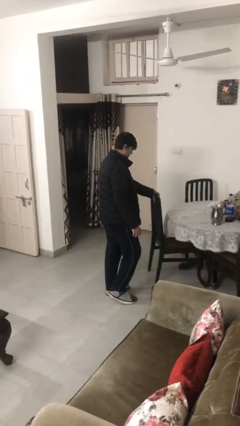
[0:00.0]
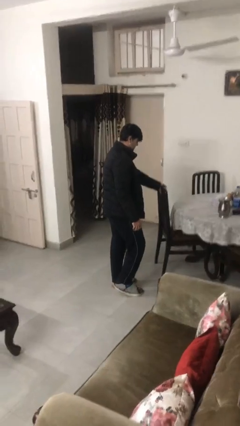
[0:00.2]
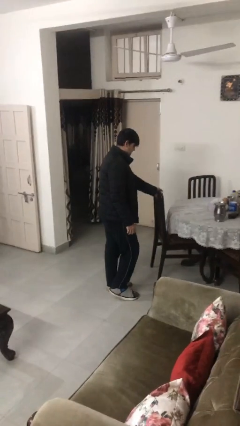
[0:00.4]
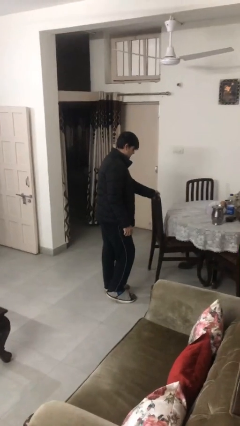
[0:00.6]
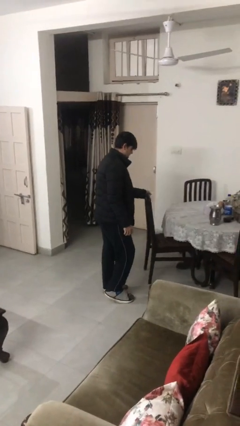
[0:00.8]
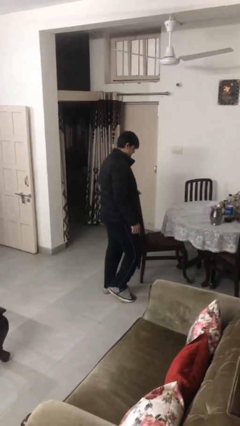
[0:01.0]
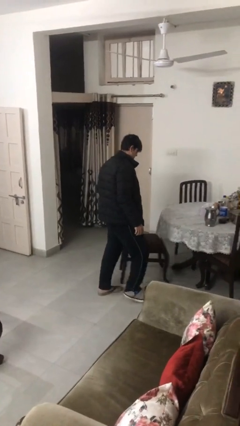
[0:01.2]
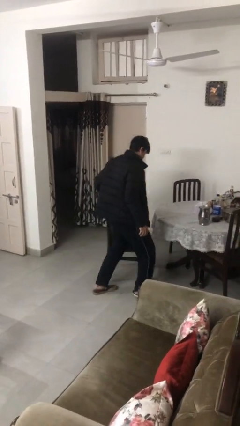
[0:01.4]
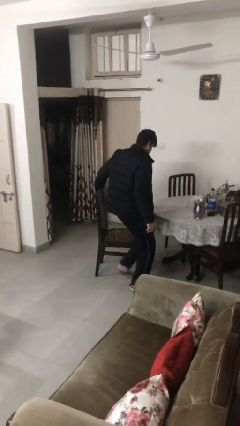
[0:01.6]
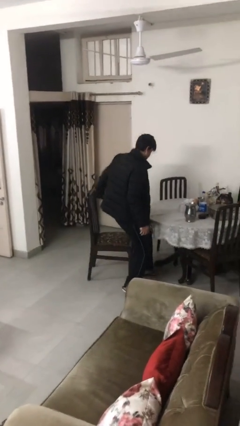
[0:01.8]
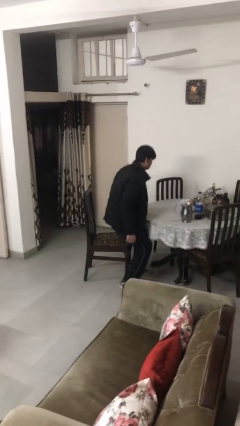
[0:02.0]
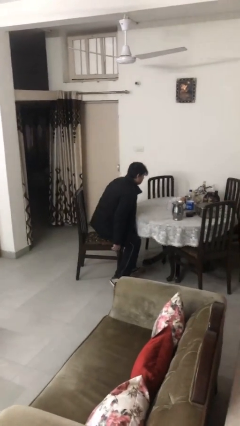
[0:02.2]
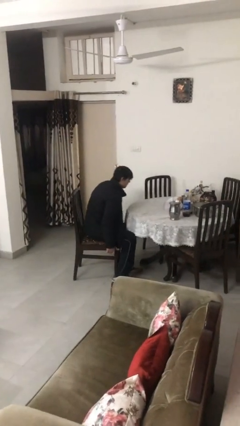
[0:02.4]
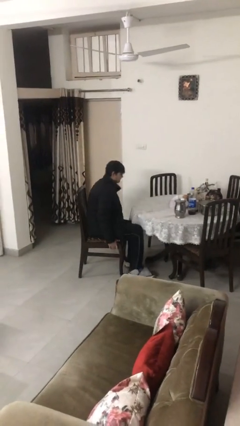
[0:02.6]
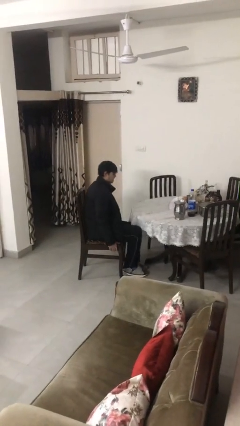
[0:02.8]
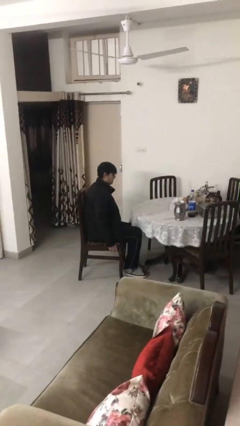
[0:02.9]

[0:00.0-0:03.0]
person sits down

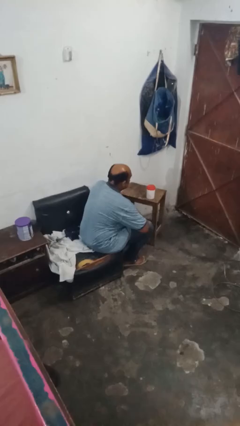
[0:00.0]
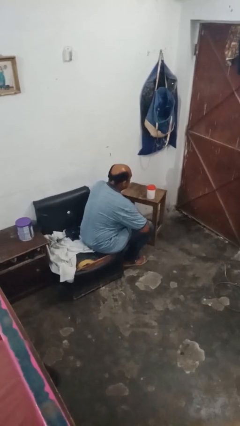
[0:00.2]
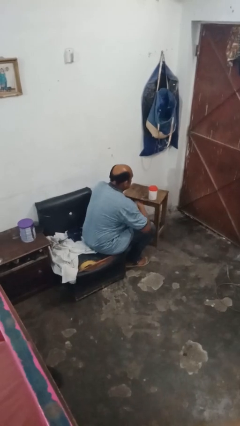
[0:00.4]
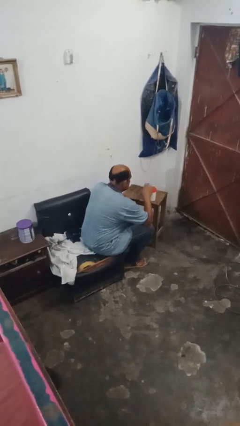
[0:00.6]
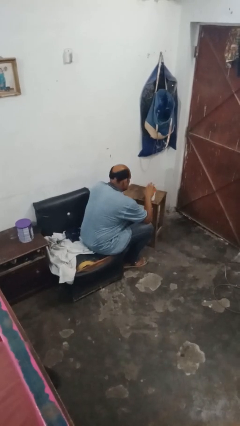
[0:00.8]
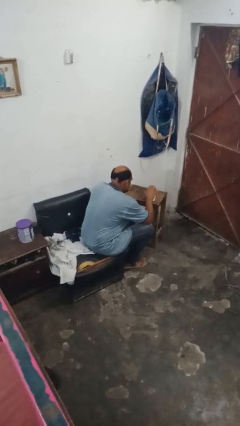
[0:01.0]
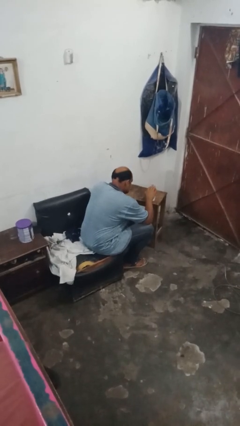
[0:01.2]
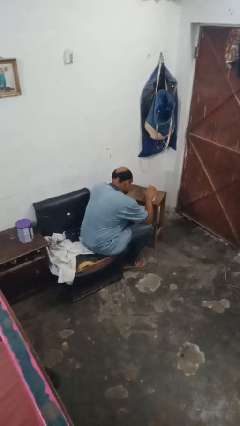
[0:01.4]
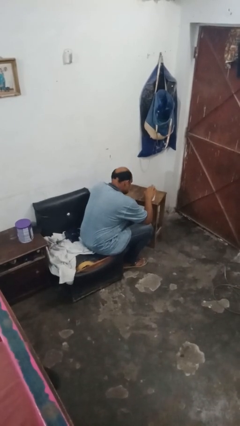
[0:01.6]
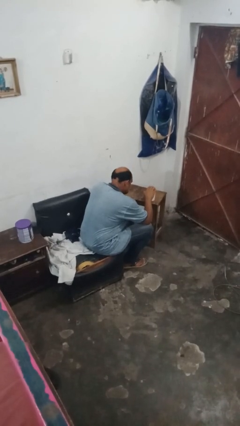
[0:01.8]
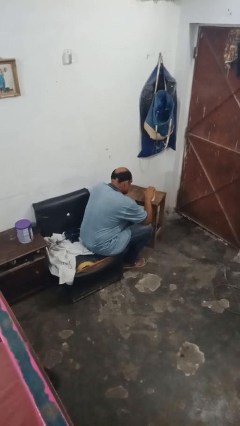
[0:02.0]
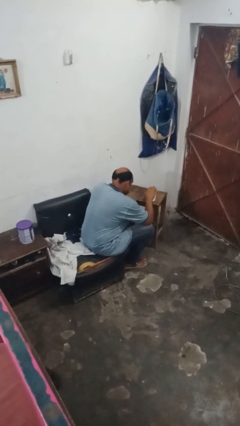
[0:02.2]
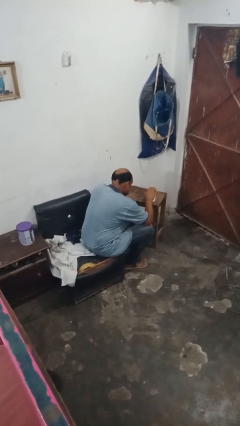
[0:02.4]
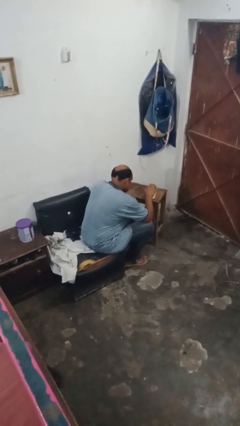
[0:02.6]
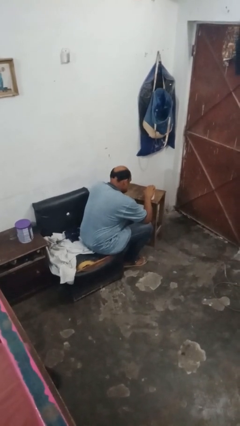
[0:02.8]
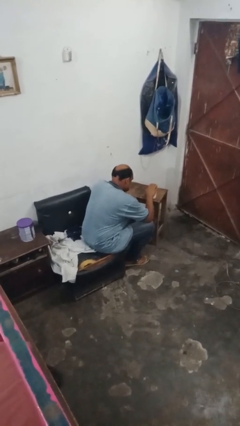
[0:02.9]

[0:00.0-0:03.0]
person taps object with finger

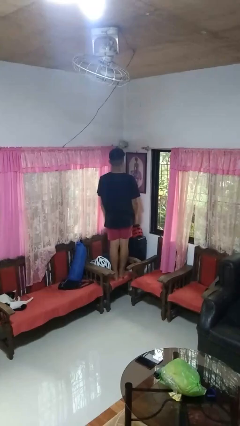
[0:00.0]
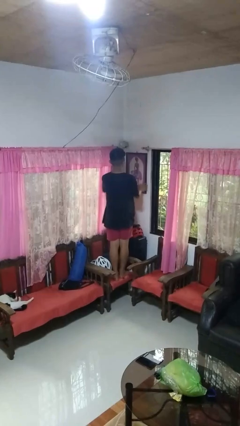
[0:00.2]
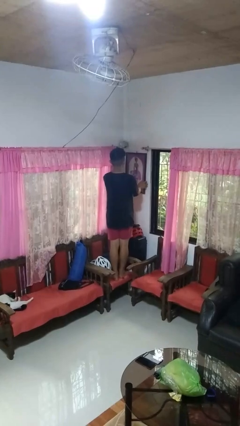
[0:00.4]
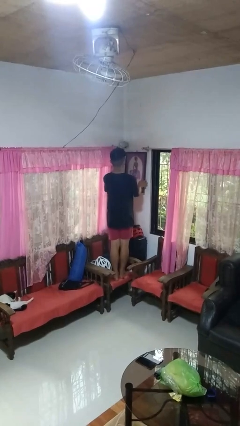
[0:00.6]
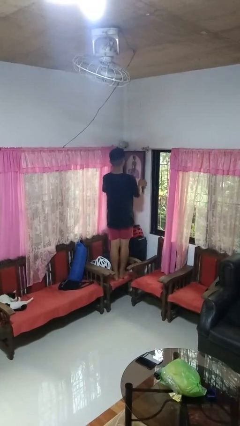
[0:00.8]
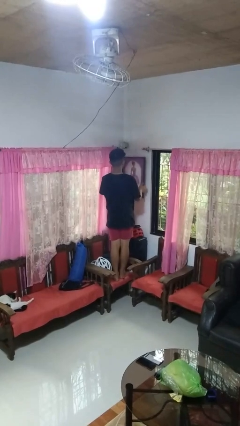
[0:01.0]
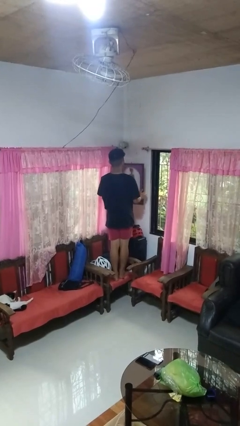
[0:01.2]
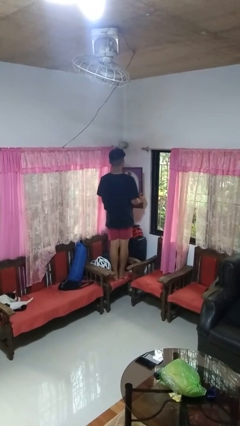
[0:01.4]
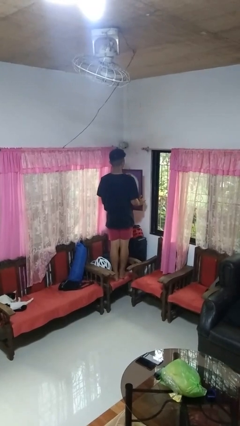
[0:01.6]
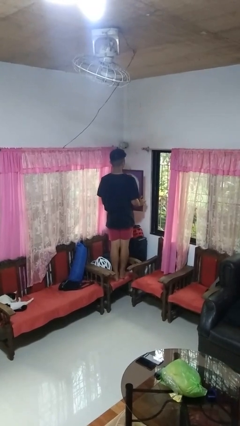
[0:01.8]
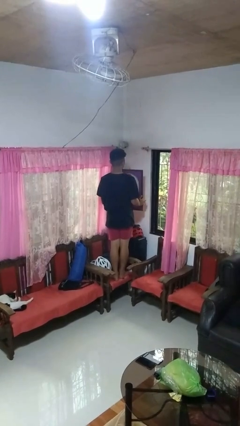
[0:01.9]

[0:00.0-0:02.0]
person takes down picture frame

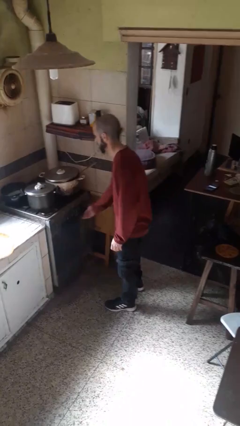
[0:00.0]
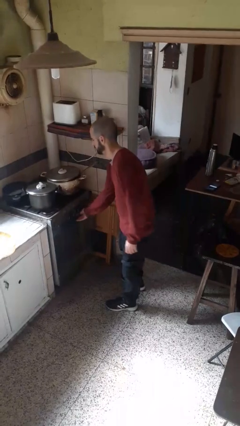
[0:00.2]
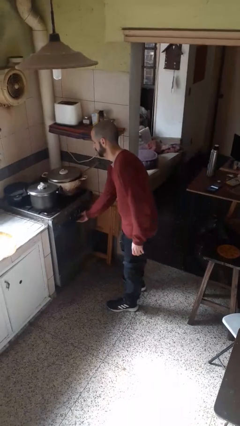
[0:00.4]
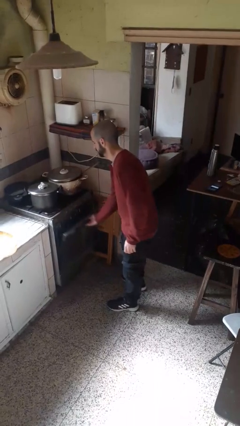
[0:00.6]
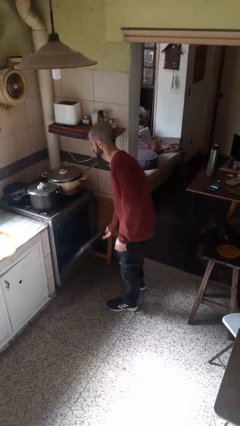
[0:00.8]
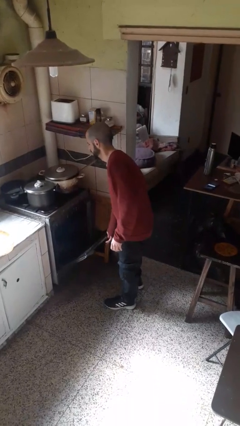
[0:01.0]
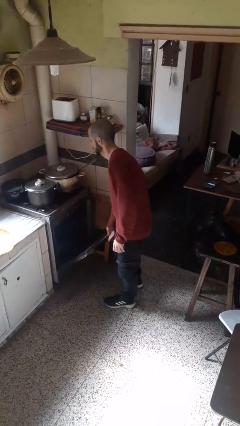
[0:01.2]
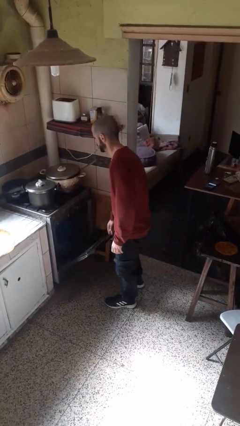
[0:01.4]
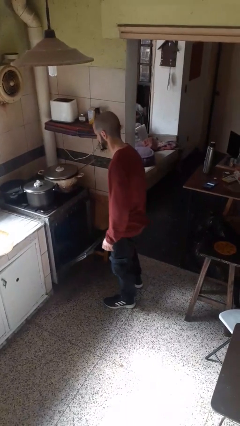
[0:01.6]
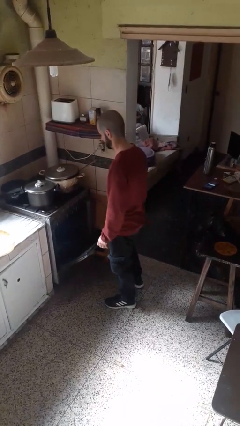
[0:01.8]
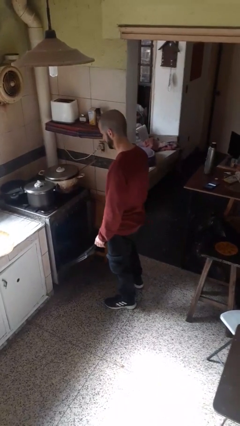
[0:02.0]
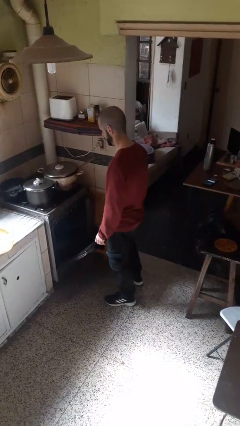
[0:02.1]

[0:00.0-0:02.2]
person opens oven door

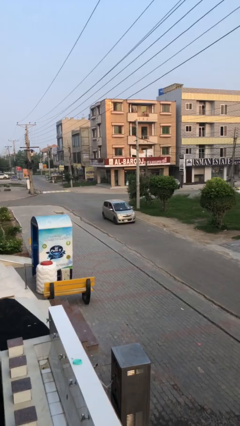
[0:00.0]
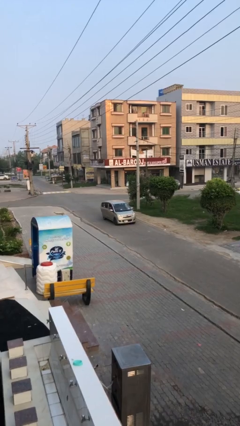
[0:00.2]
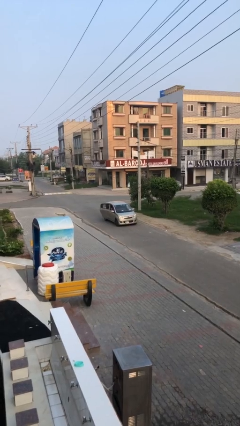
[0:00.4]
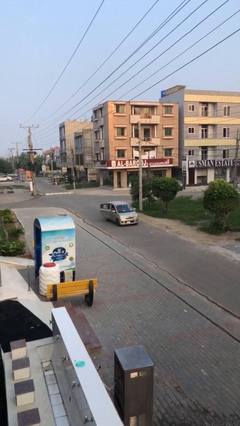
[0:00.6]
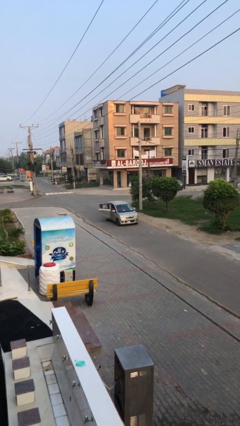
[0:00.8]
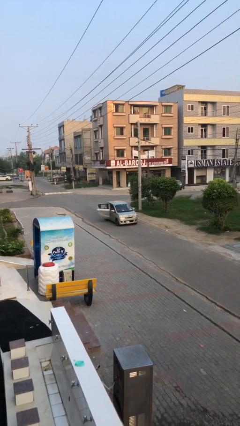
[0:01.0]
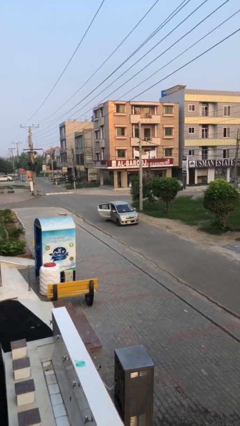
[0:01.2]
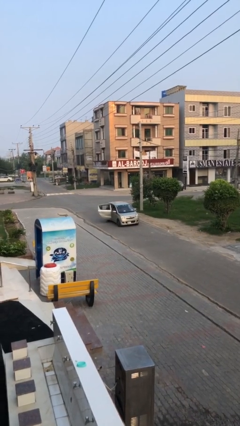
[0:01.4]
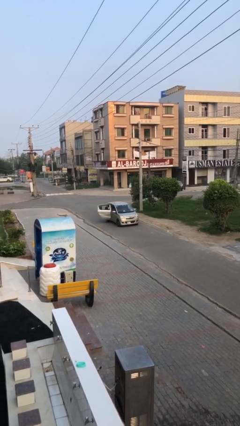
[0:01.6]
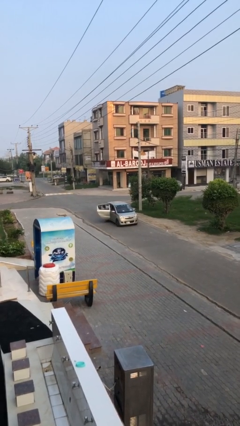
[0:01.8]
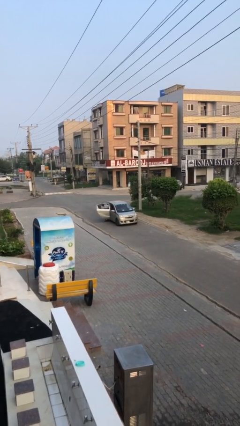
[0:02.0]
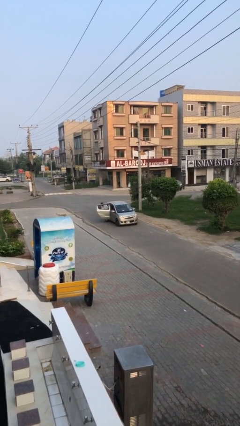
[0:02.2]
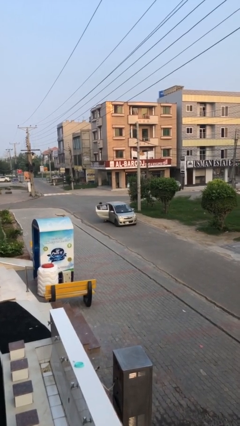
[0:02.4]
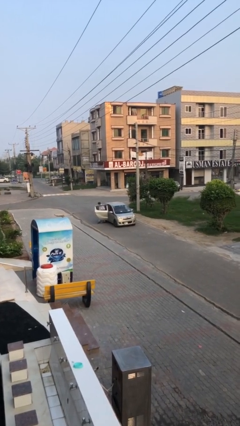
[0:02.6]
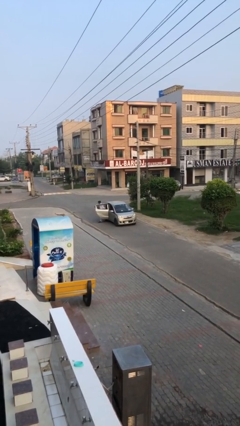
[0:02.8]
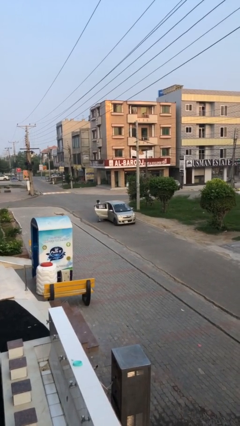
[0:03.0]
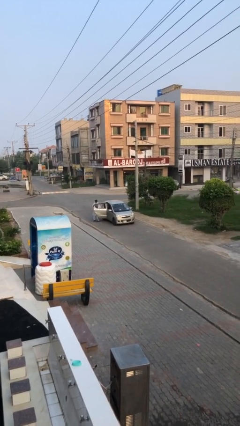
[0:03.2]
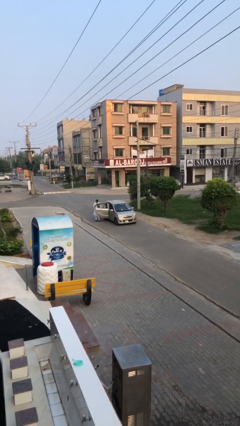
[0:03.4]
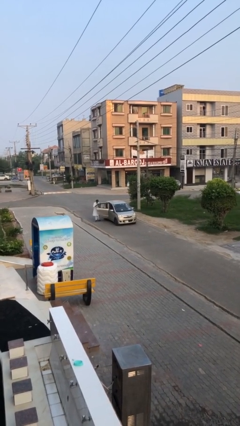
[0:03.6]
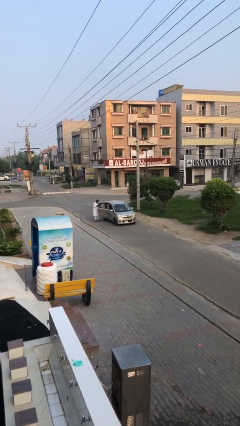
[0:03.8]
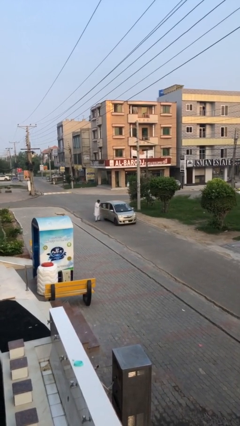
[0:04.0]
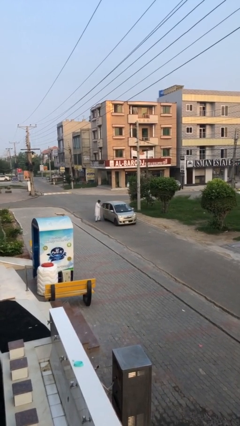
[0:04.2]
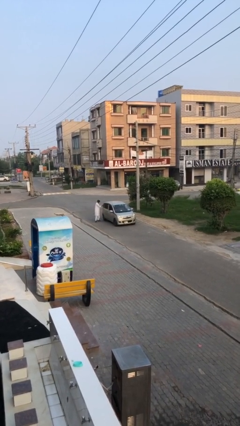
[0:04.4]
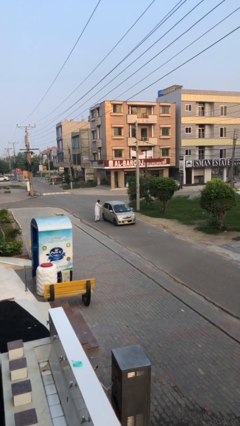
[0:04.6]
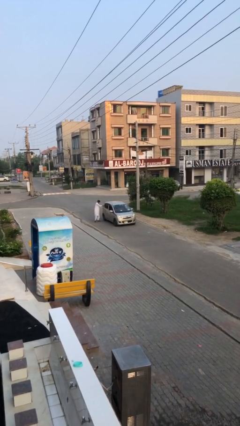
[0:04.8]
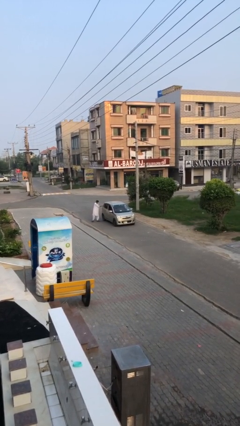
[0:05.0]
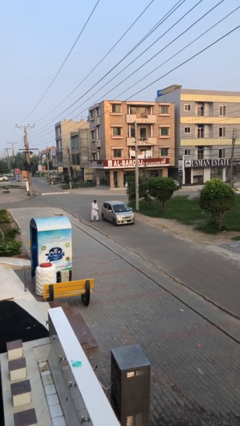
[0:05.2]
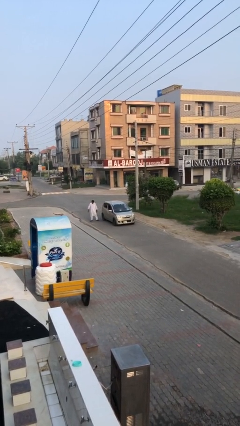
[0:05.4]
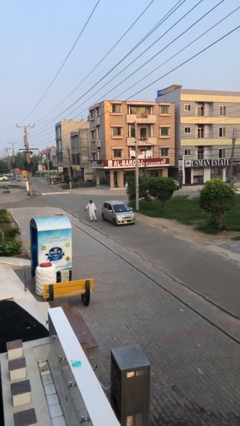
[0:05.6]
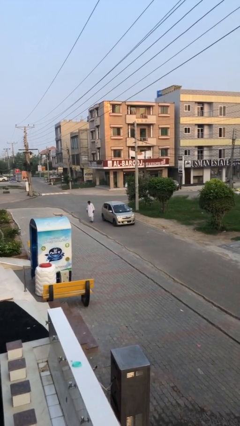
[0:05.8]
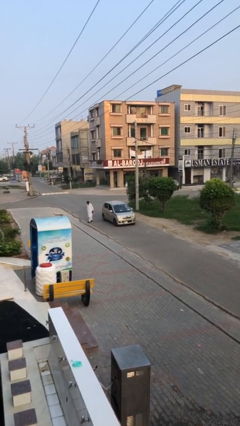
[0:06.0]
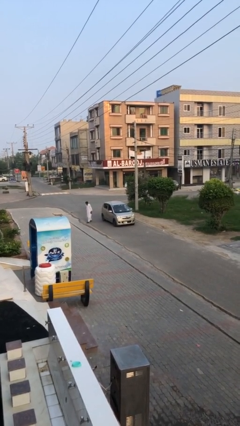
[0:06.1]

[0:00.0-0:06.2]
car drops off person

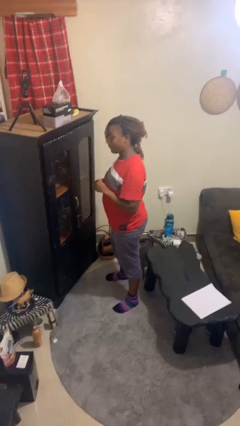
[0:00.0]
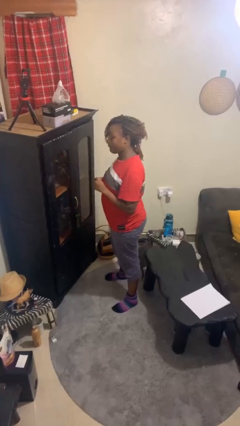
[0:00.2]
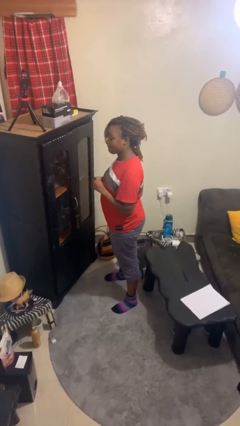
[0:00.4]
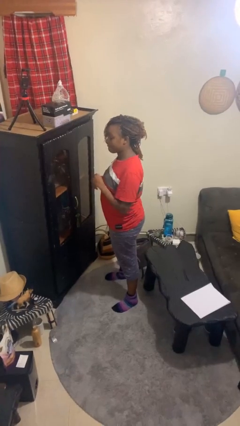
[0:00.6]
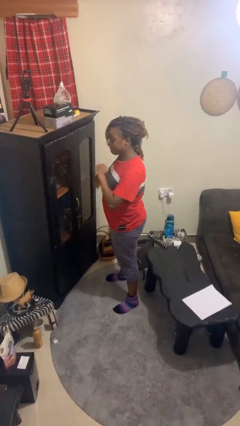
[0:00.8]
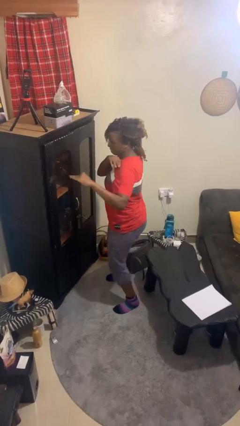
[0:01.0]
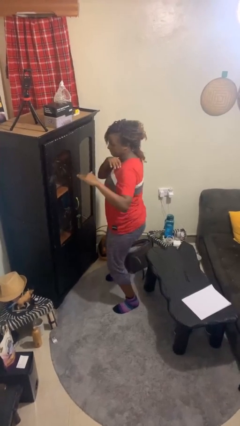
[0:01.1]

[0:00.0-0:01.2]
person karate chop
